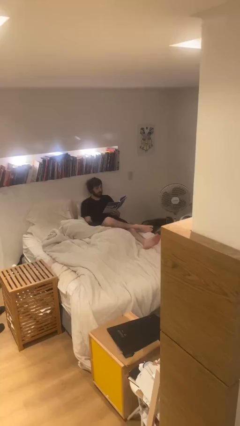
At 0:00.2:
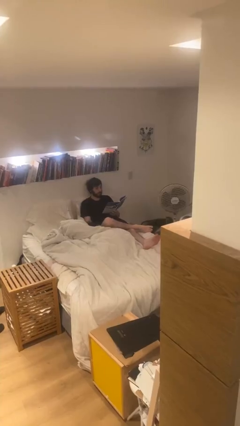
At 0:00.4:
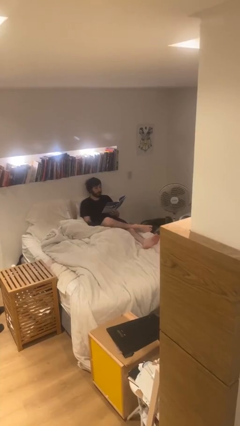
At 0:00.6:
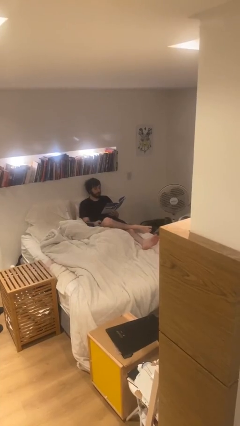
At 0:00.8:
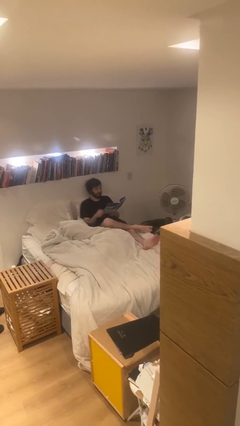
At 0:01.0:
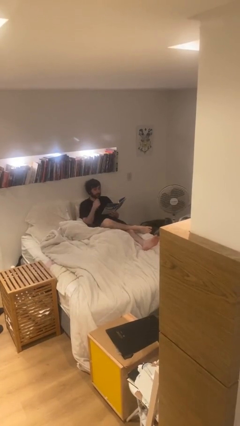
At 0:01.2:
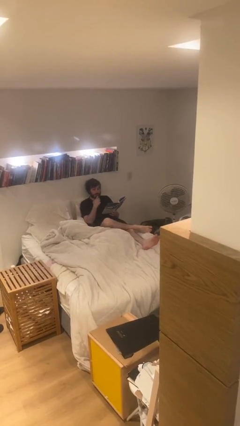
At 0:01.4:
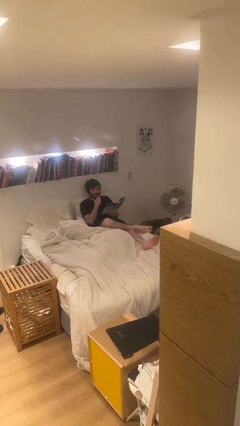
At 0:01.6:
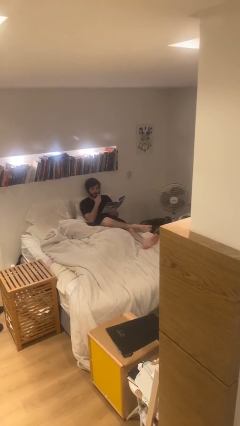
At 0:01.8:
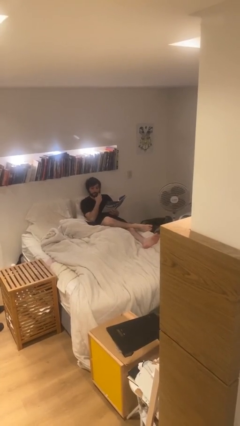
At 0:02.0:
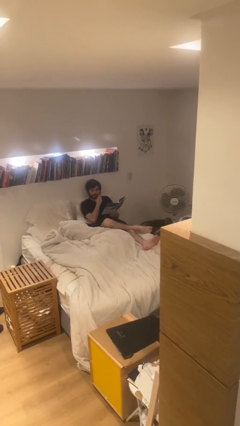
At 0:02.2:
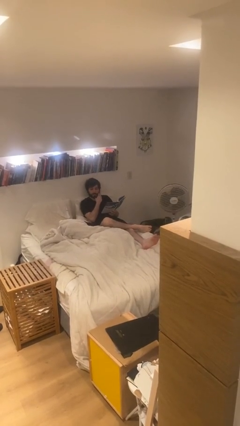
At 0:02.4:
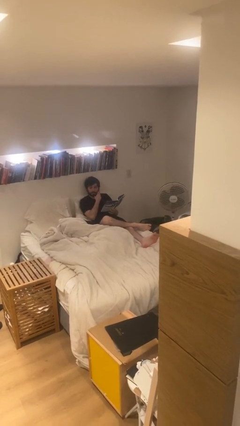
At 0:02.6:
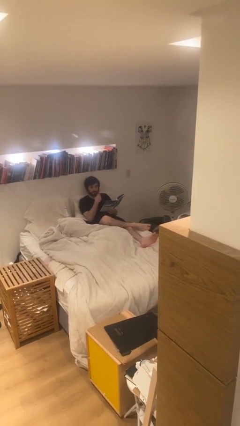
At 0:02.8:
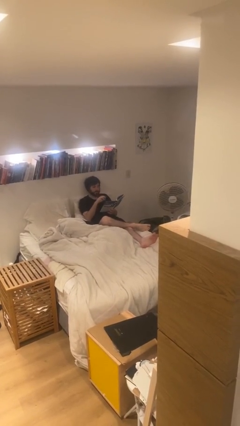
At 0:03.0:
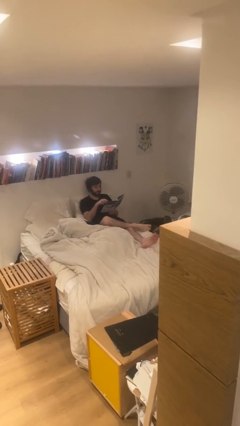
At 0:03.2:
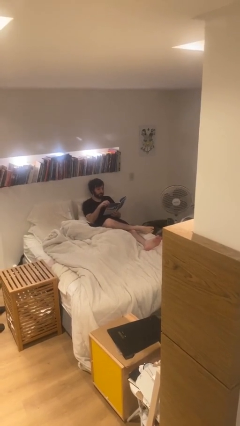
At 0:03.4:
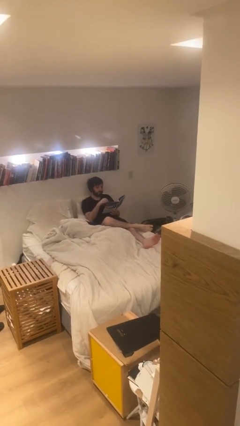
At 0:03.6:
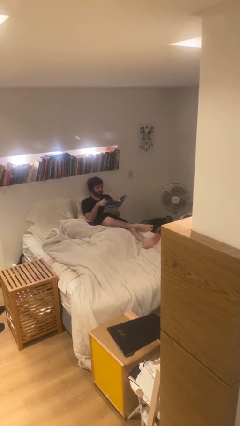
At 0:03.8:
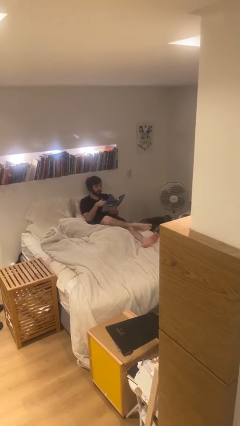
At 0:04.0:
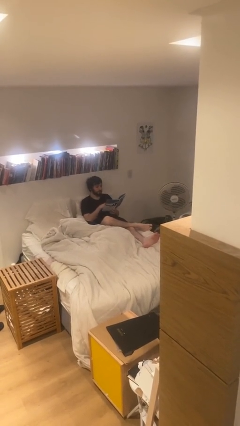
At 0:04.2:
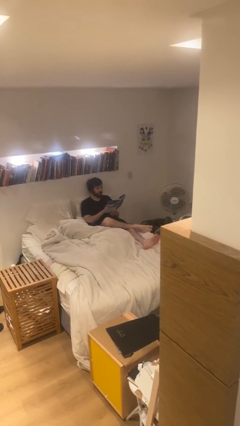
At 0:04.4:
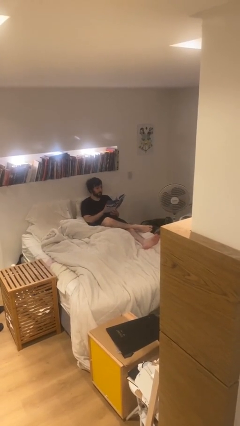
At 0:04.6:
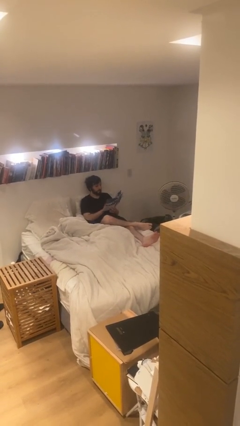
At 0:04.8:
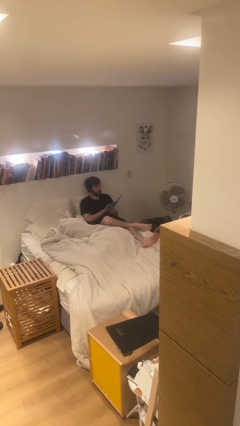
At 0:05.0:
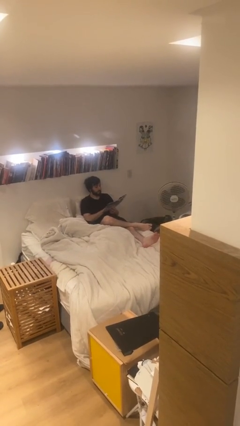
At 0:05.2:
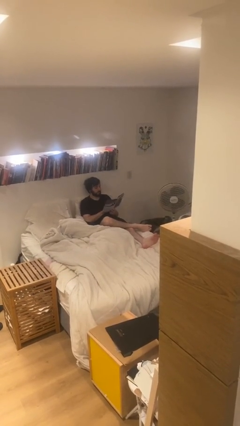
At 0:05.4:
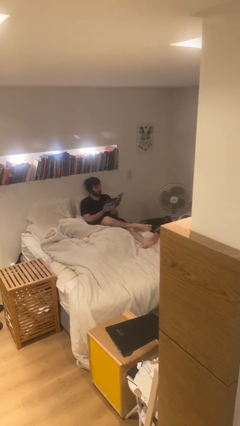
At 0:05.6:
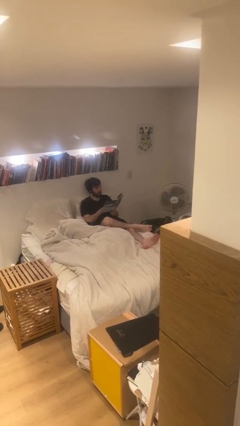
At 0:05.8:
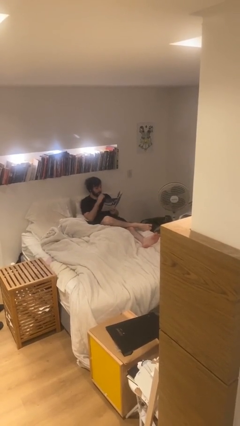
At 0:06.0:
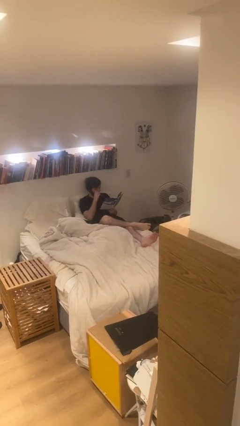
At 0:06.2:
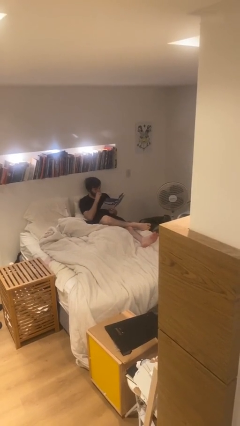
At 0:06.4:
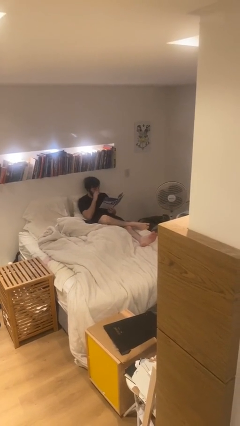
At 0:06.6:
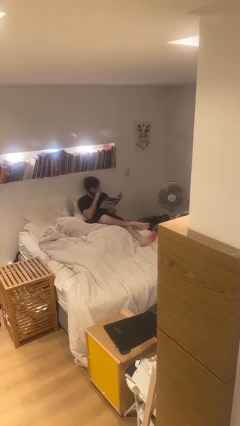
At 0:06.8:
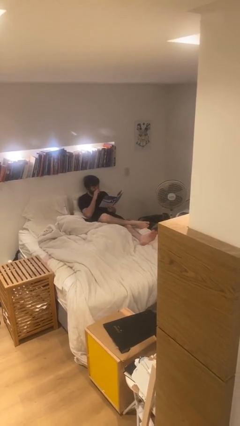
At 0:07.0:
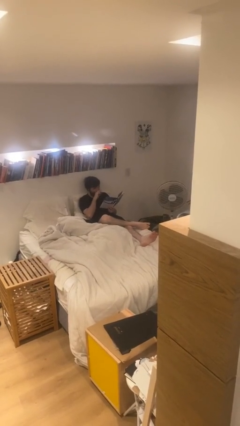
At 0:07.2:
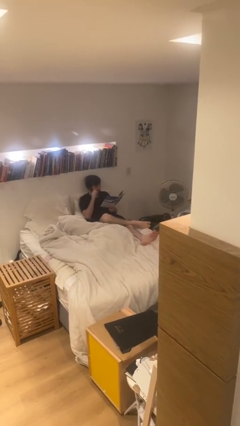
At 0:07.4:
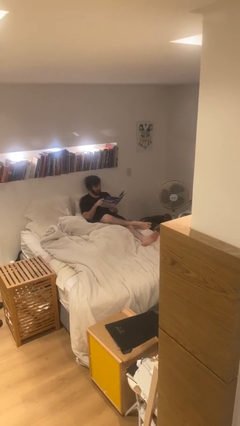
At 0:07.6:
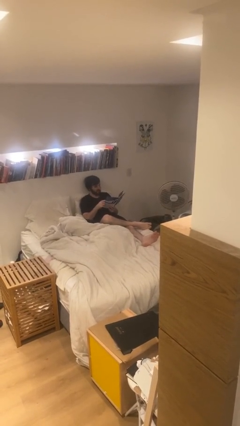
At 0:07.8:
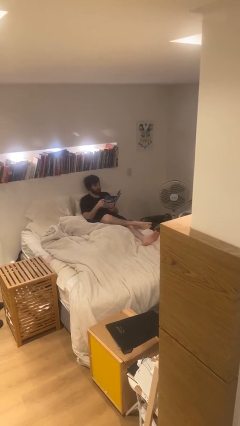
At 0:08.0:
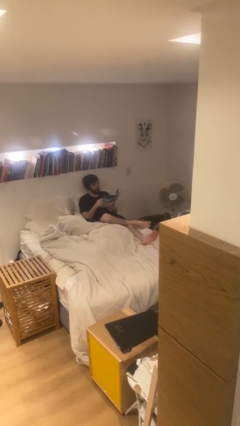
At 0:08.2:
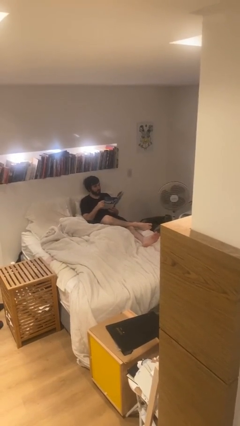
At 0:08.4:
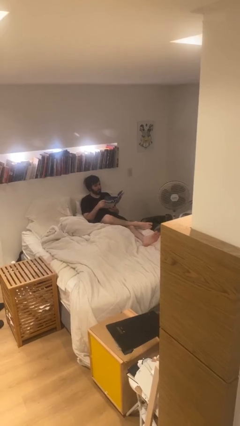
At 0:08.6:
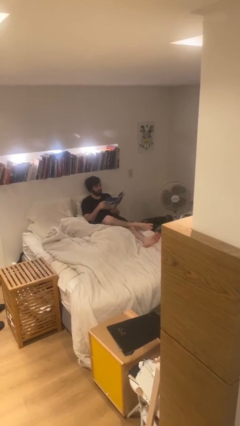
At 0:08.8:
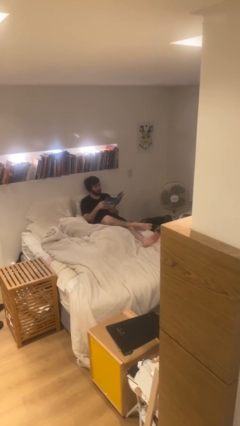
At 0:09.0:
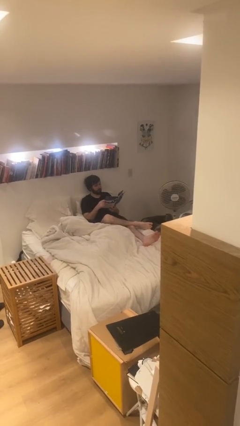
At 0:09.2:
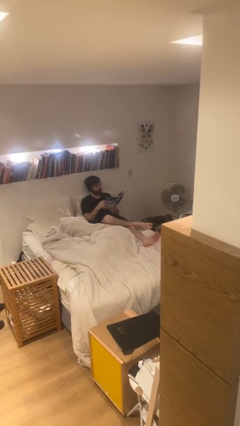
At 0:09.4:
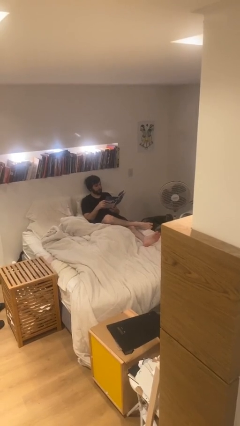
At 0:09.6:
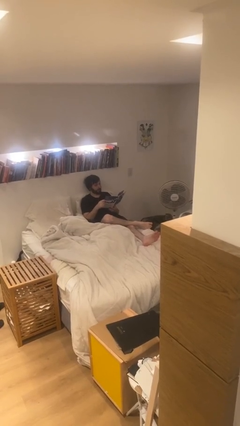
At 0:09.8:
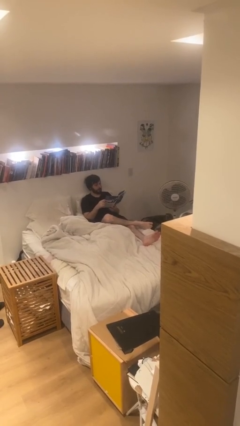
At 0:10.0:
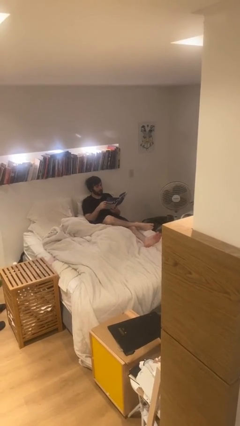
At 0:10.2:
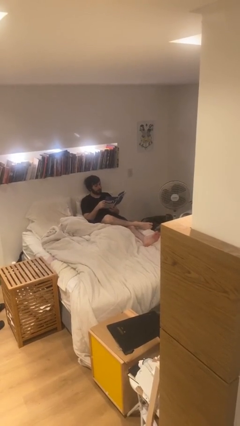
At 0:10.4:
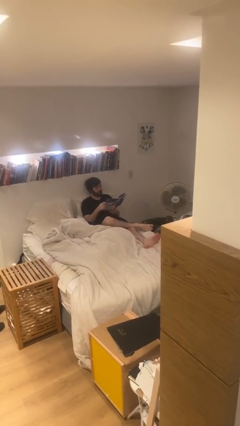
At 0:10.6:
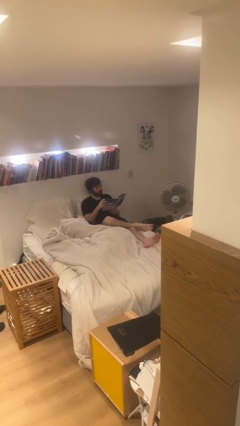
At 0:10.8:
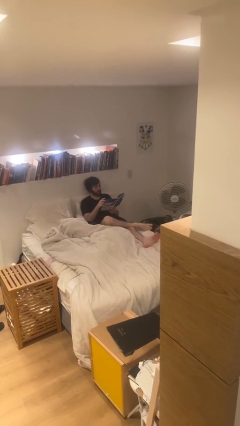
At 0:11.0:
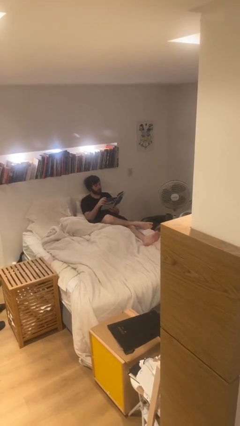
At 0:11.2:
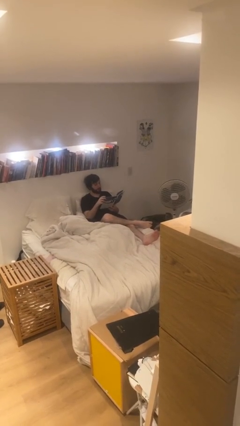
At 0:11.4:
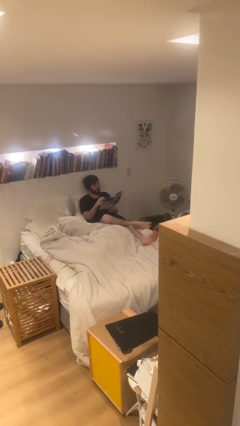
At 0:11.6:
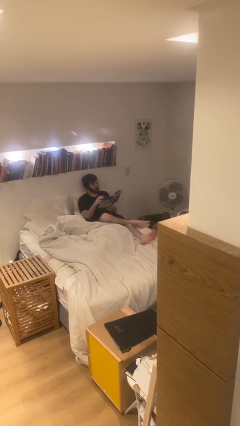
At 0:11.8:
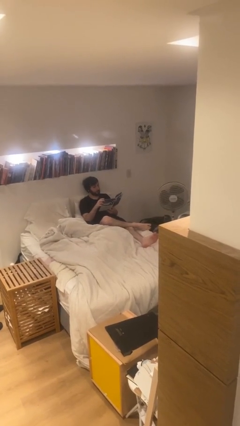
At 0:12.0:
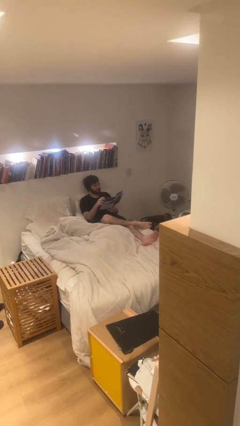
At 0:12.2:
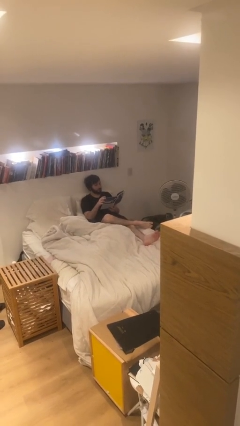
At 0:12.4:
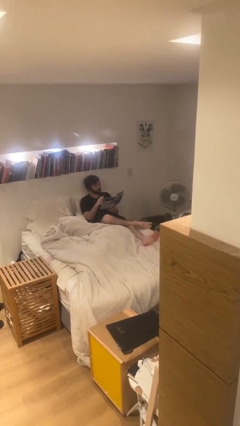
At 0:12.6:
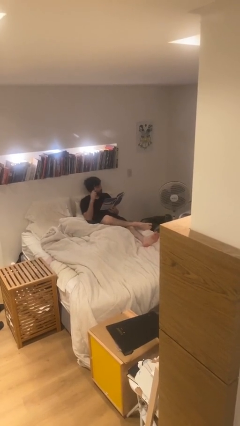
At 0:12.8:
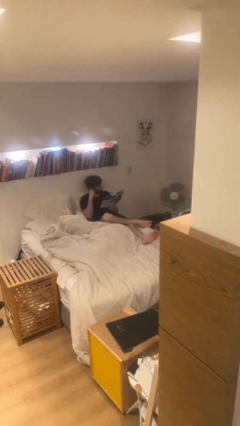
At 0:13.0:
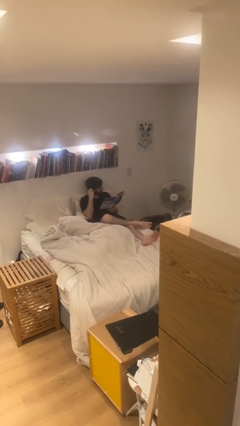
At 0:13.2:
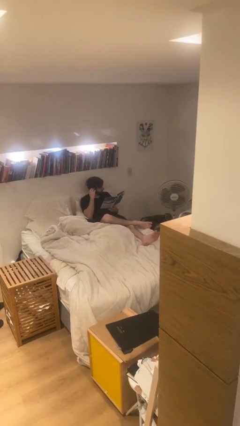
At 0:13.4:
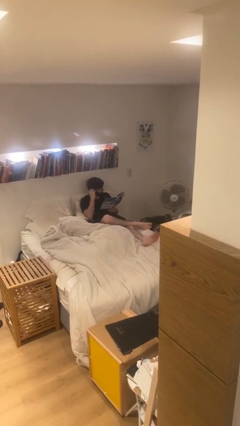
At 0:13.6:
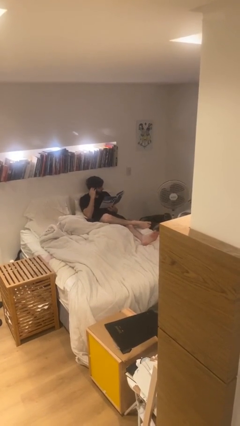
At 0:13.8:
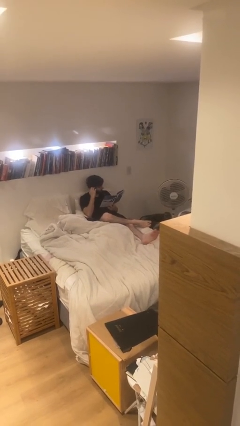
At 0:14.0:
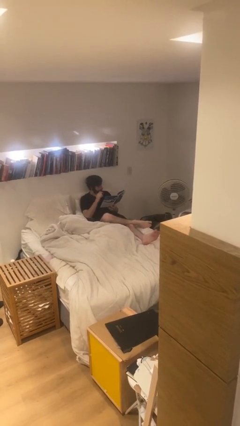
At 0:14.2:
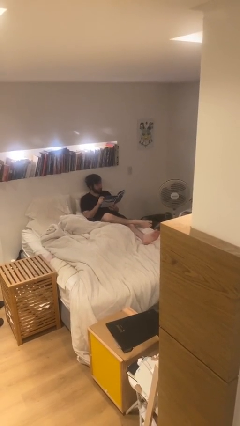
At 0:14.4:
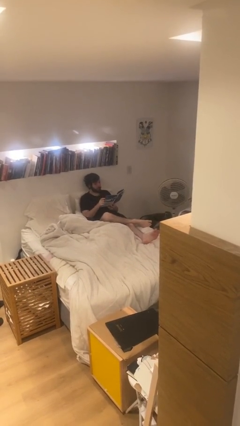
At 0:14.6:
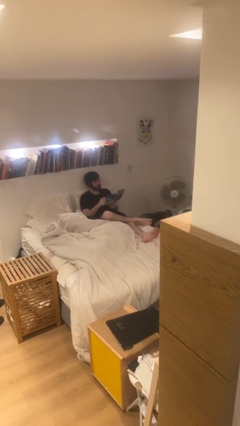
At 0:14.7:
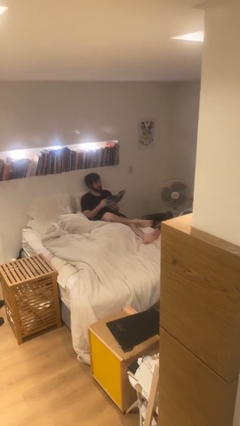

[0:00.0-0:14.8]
person reads document

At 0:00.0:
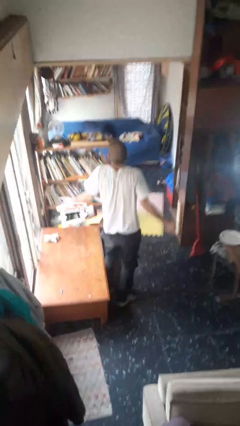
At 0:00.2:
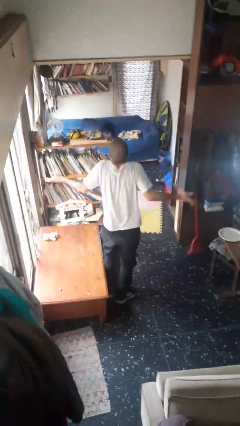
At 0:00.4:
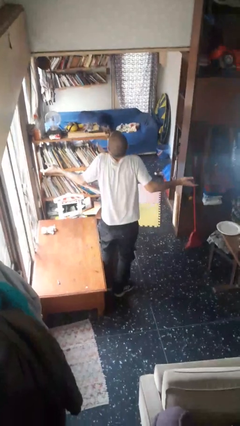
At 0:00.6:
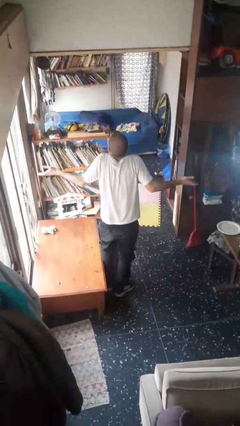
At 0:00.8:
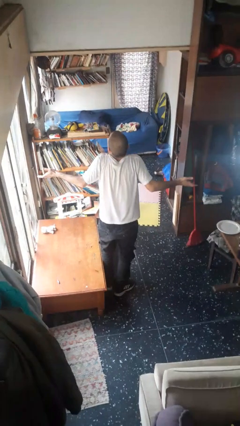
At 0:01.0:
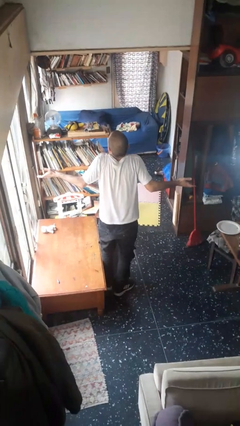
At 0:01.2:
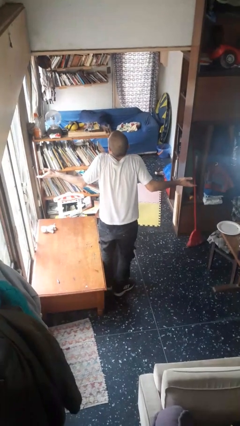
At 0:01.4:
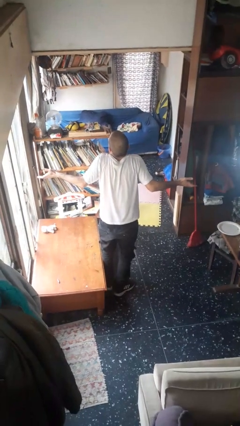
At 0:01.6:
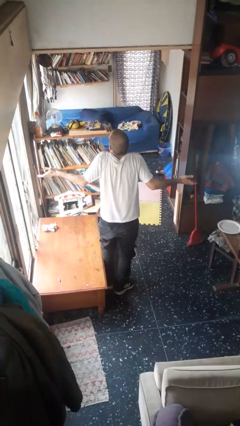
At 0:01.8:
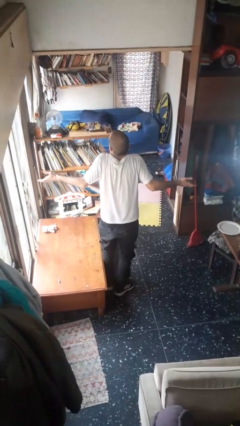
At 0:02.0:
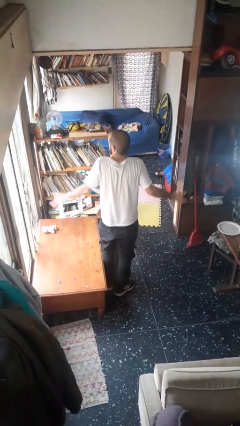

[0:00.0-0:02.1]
person shrugs

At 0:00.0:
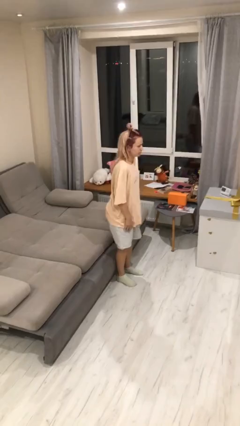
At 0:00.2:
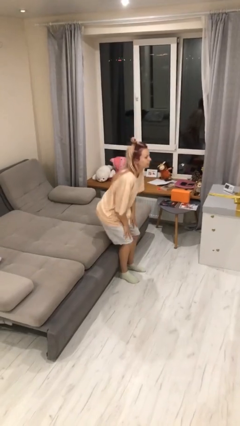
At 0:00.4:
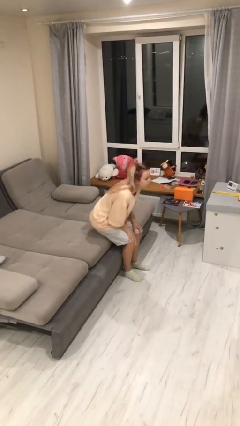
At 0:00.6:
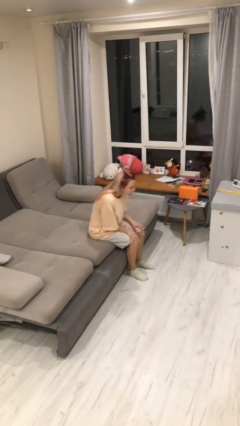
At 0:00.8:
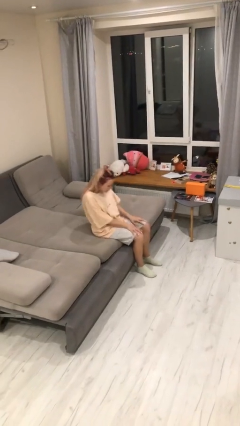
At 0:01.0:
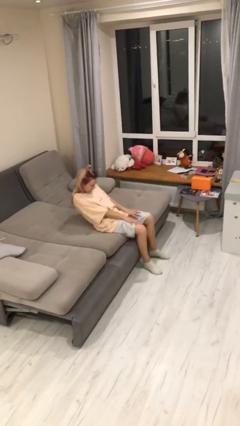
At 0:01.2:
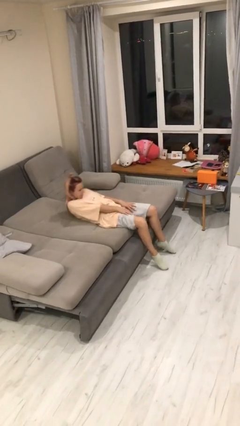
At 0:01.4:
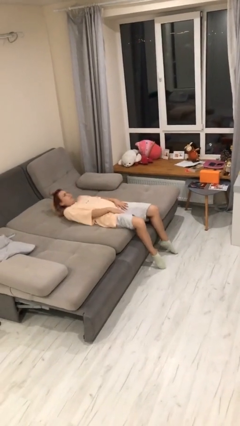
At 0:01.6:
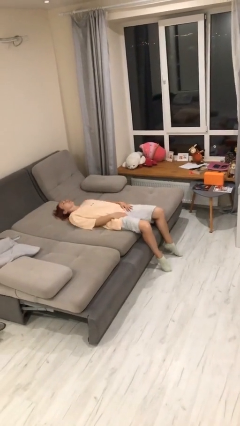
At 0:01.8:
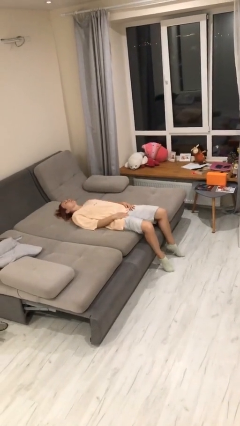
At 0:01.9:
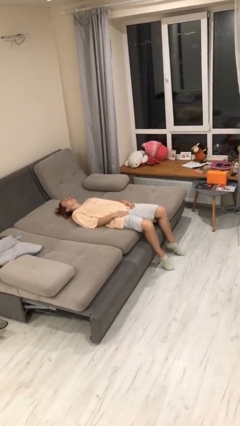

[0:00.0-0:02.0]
person lies down on bed
